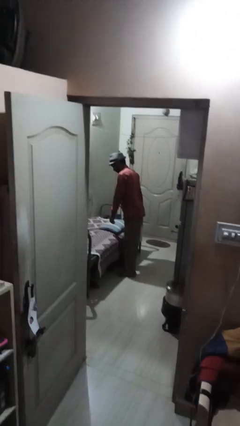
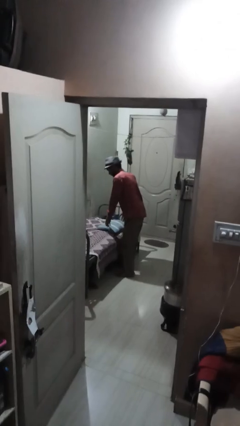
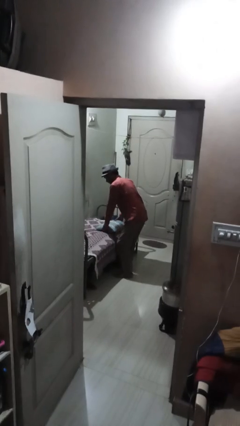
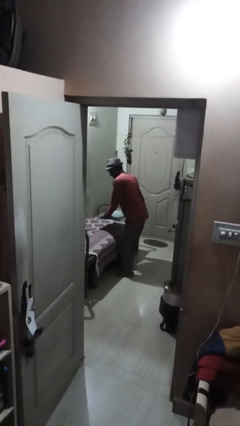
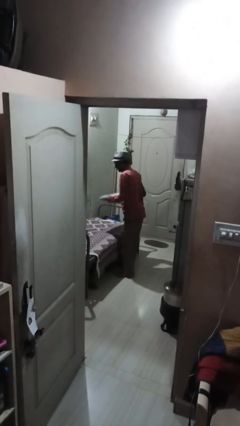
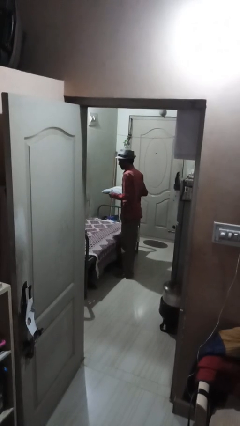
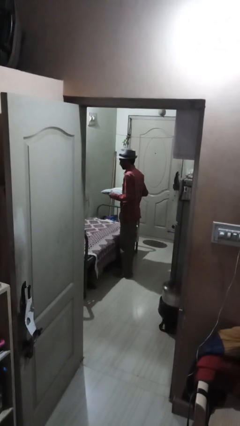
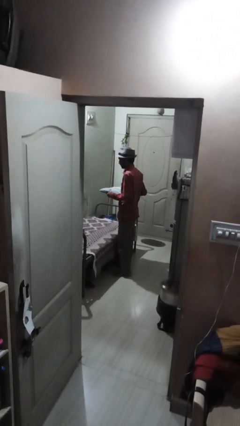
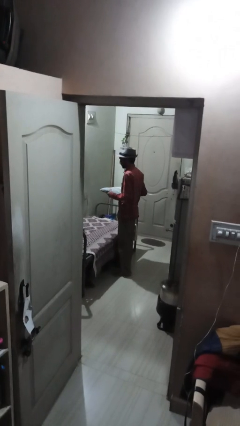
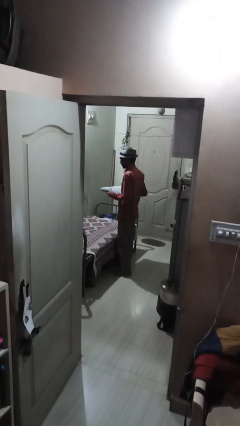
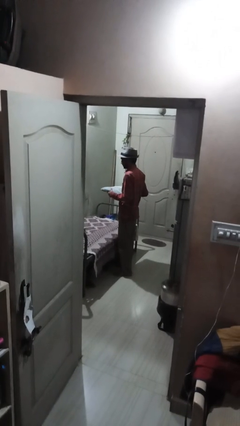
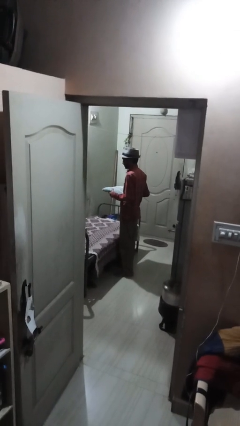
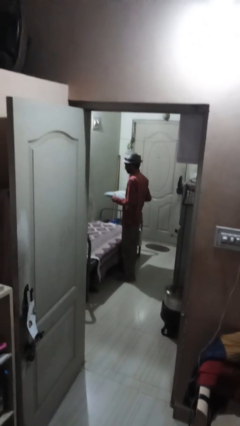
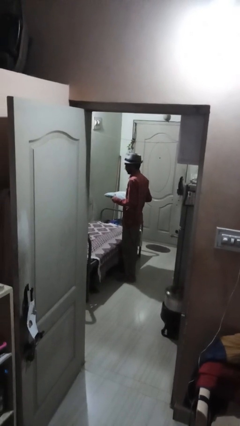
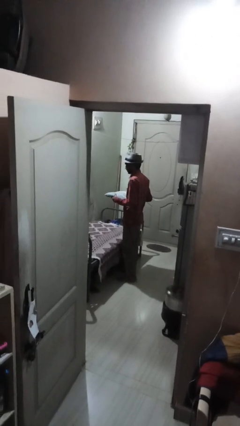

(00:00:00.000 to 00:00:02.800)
person picks up object from bed

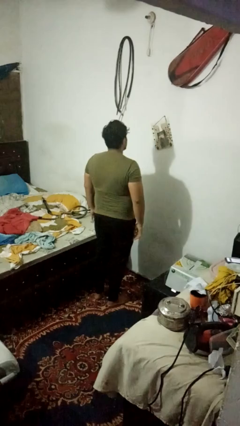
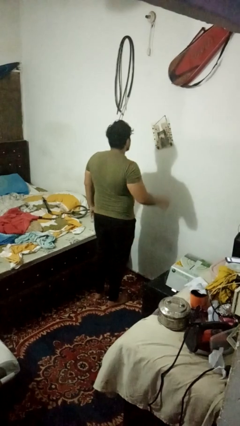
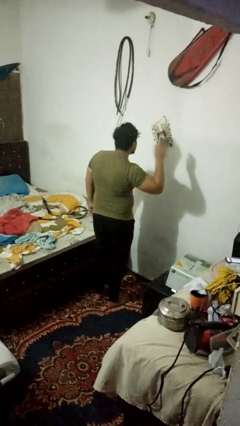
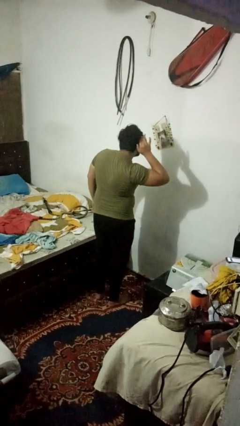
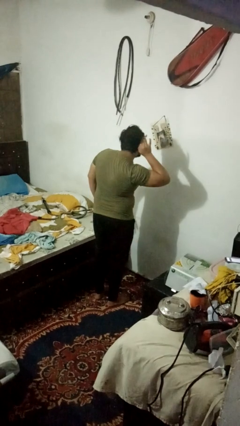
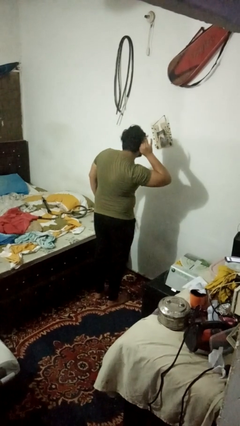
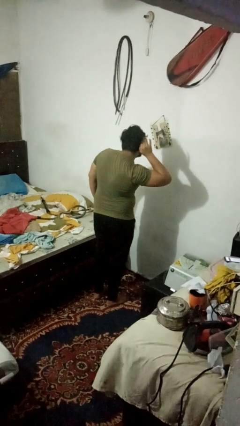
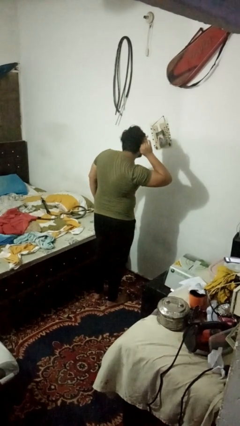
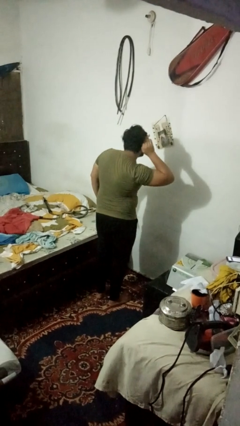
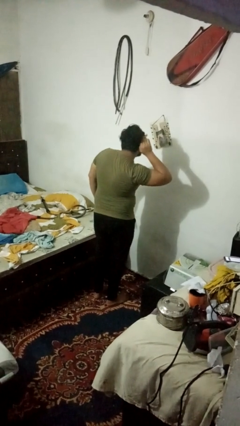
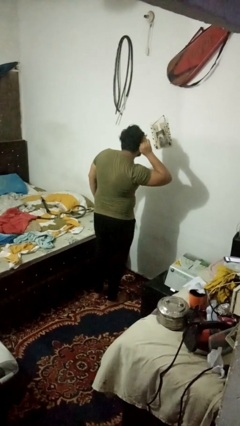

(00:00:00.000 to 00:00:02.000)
person gestures listen closely

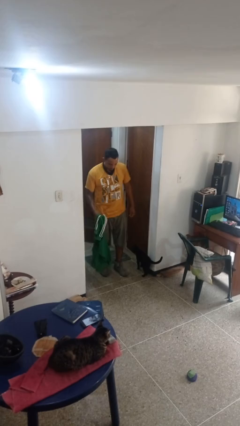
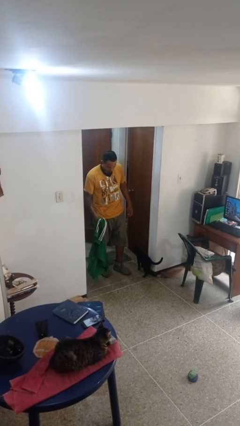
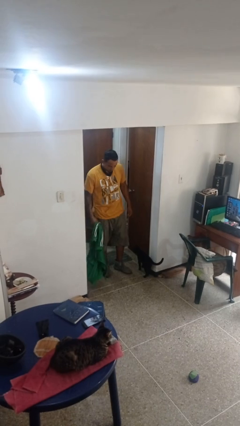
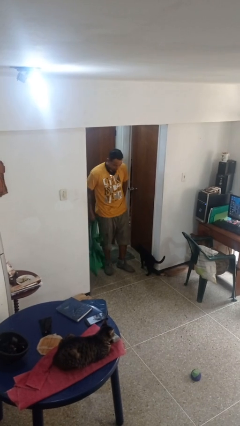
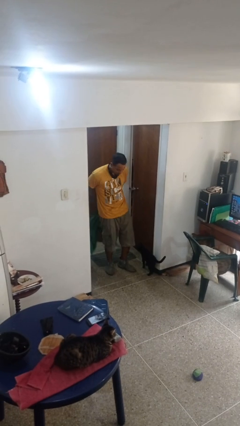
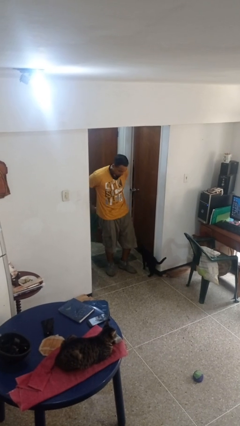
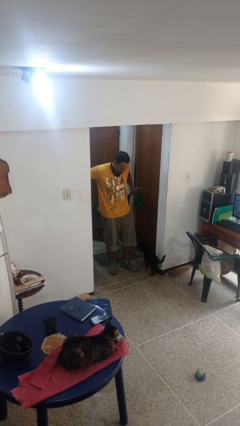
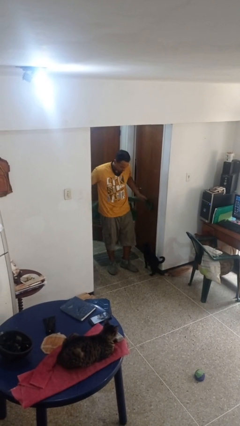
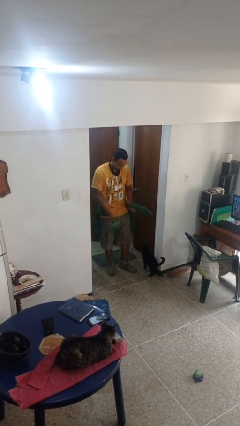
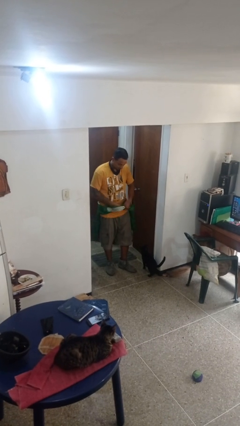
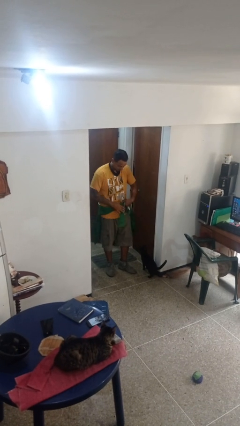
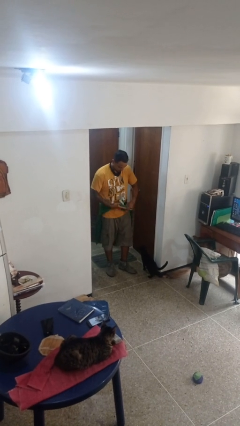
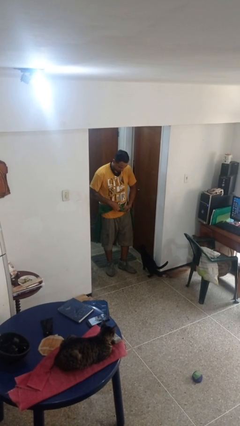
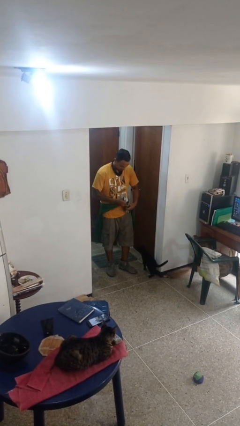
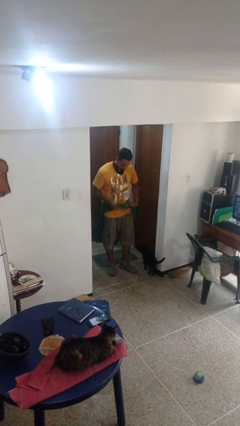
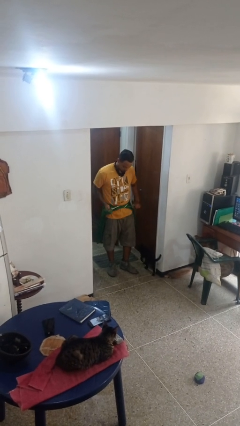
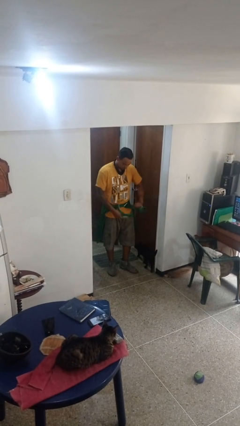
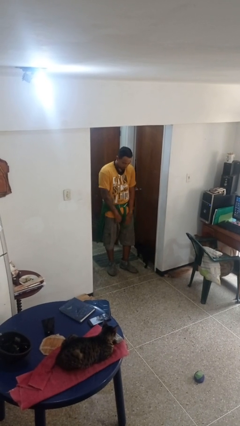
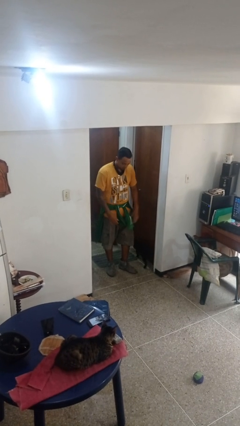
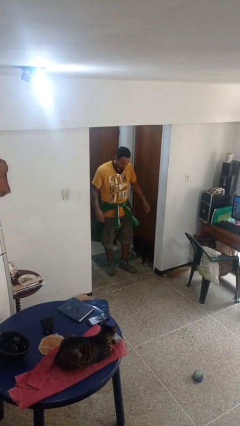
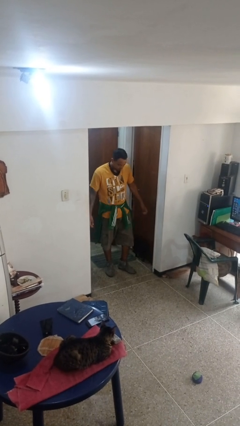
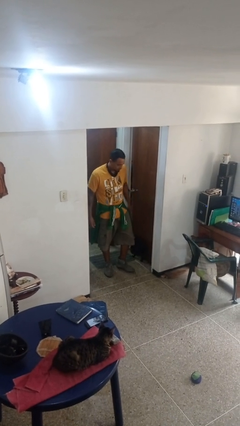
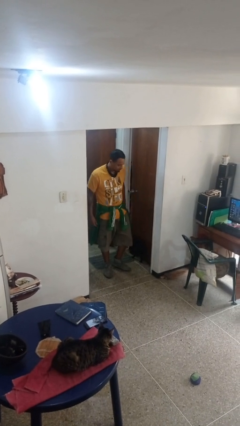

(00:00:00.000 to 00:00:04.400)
person ties jacket around waist

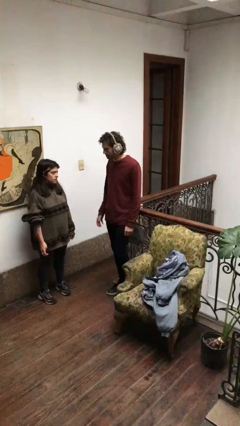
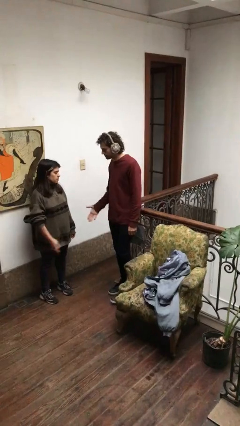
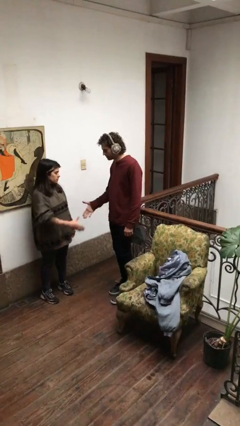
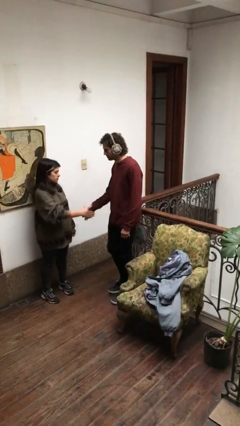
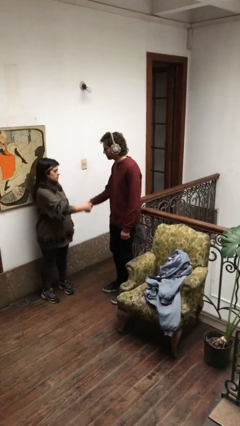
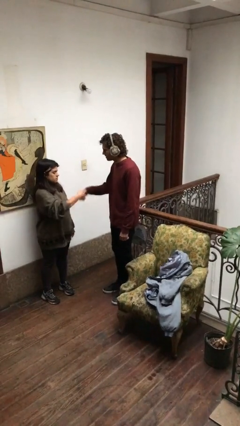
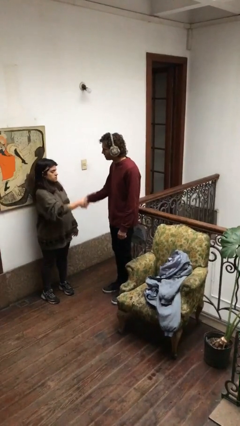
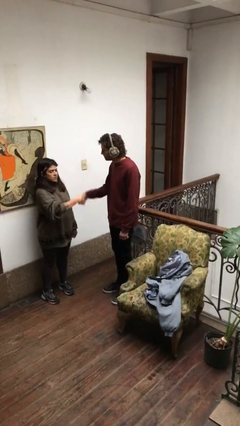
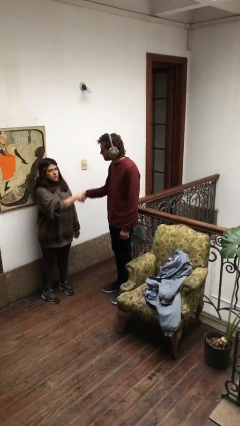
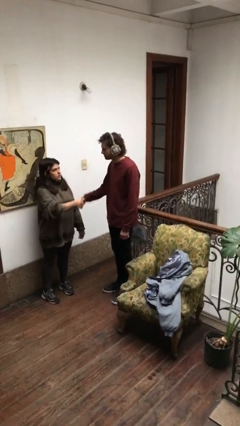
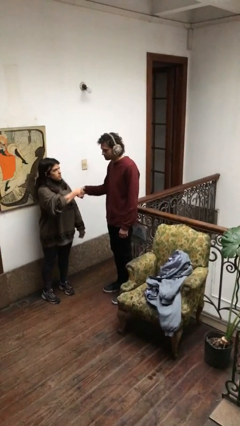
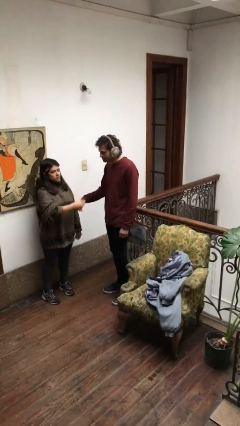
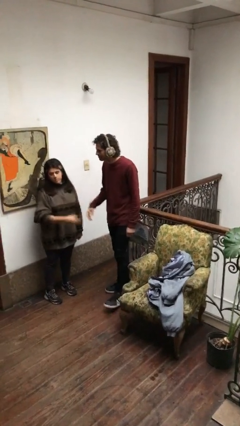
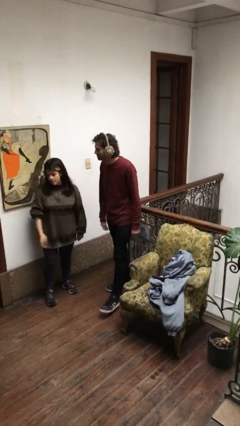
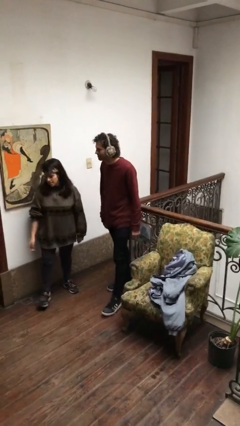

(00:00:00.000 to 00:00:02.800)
person shakes hand

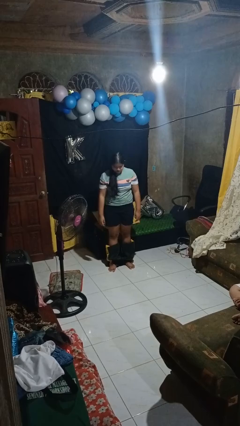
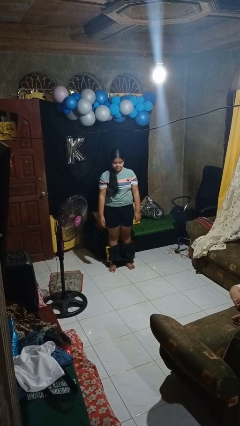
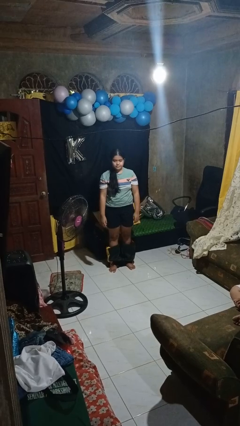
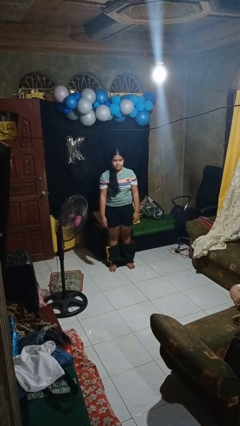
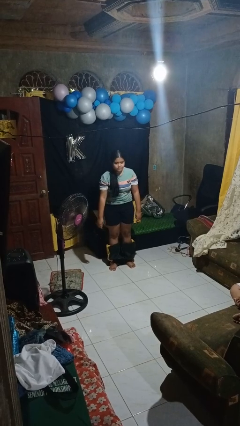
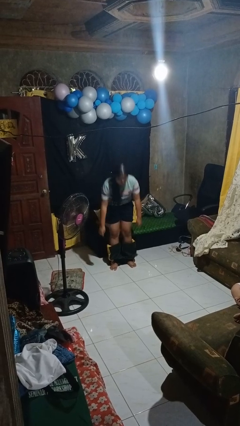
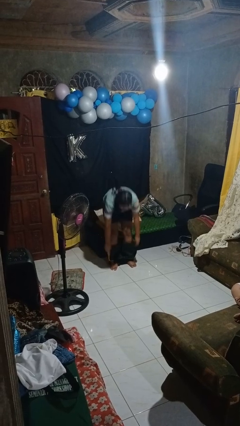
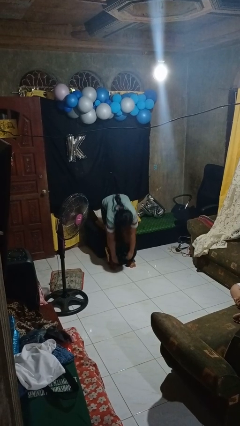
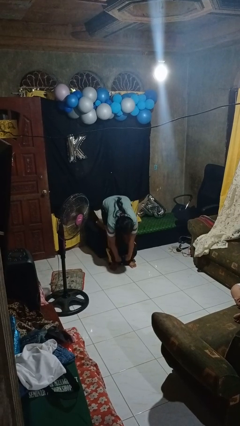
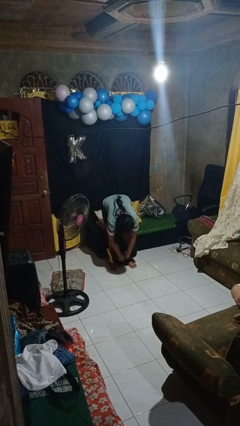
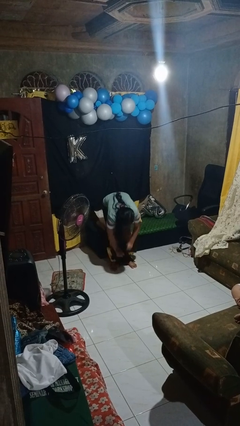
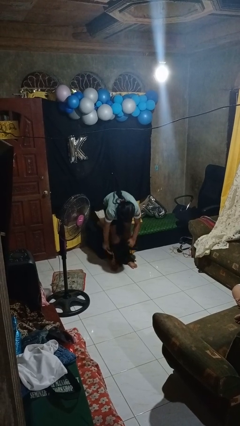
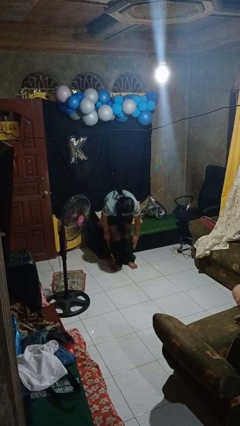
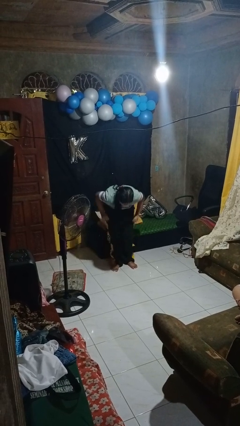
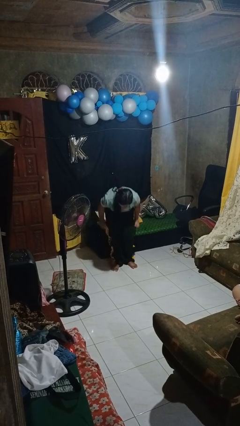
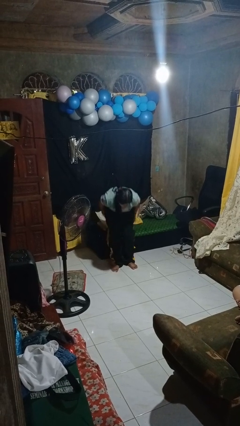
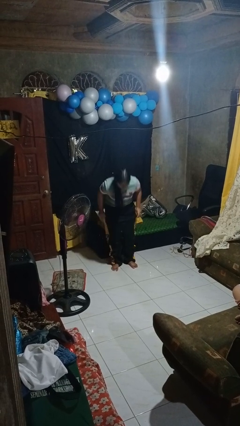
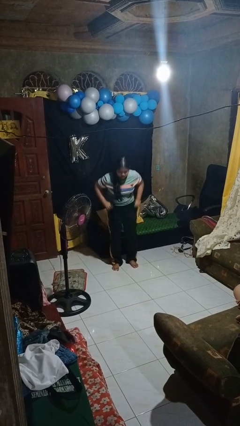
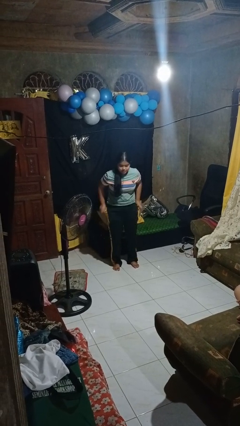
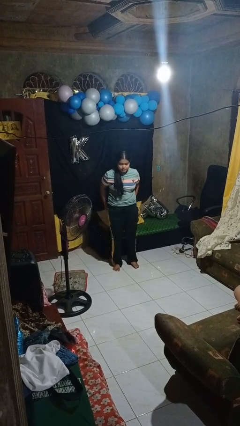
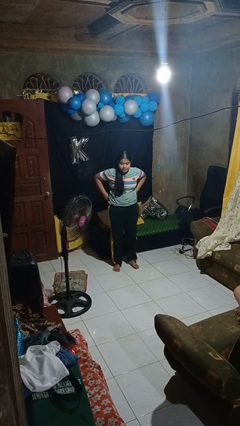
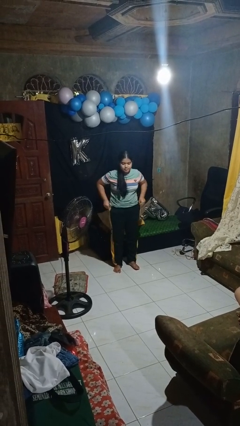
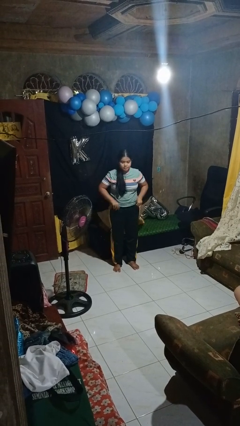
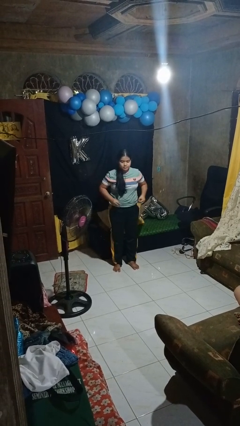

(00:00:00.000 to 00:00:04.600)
person puts on pants

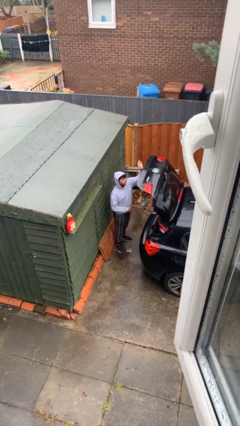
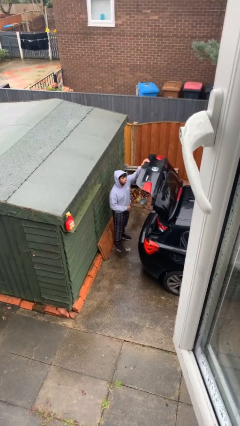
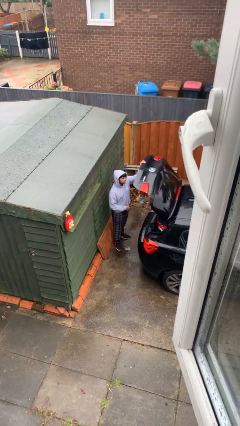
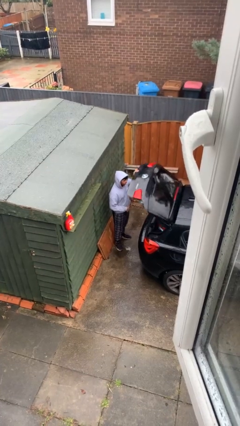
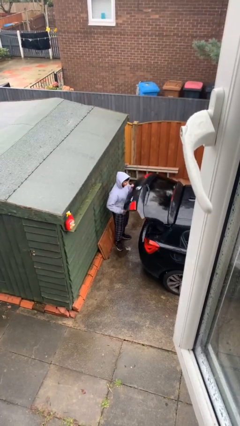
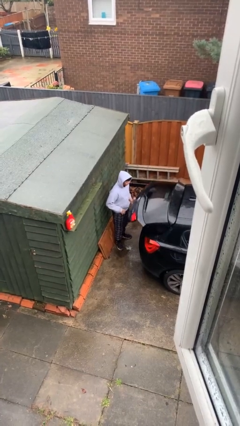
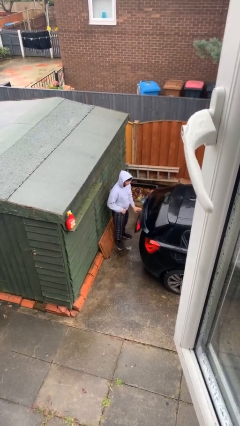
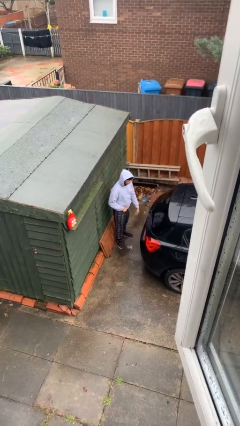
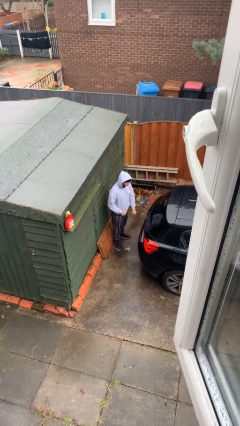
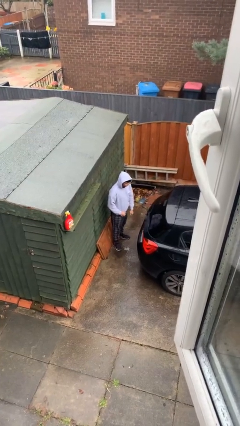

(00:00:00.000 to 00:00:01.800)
person closes car trunk
